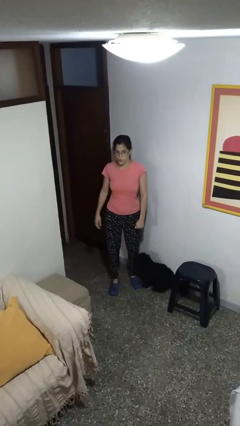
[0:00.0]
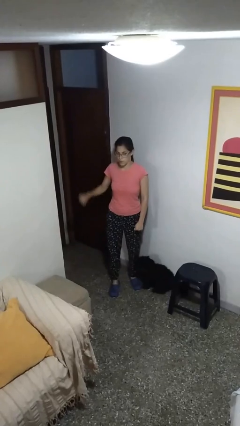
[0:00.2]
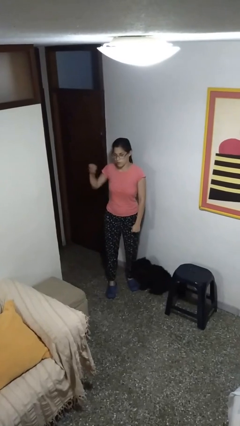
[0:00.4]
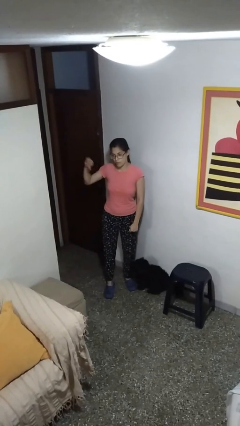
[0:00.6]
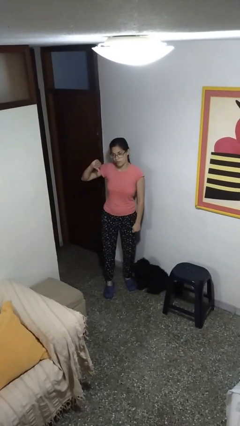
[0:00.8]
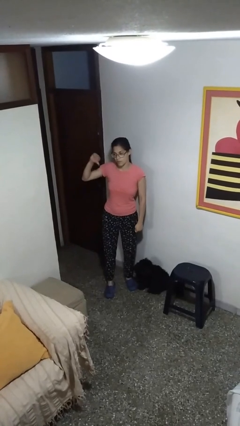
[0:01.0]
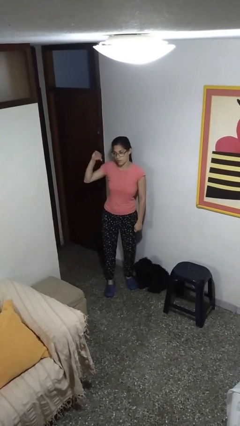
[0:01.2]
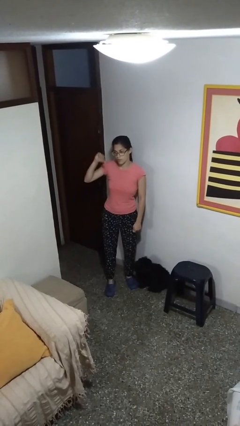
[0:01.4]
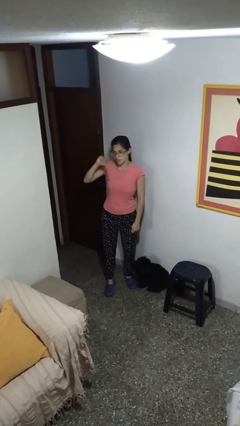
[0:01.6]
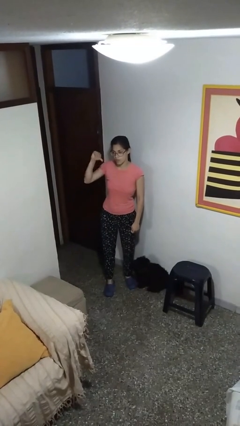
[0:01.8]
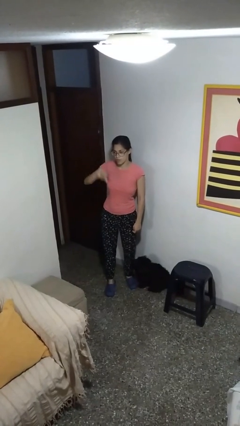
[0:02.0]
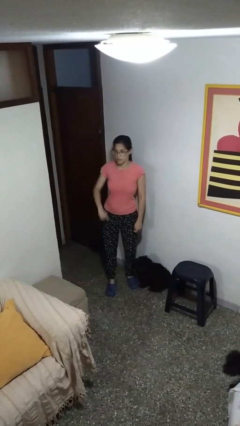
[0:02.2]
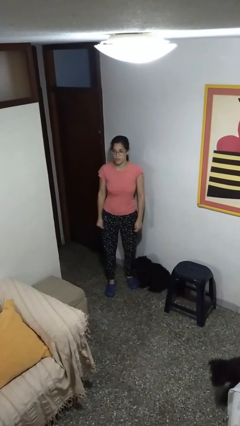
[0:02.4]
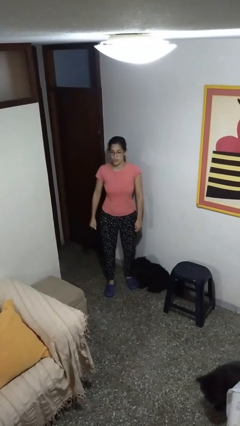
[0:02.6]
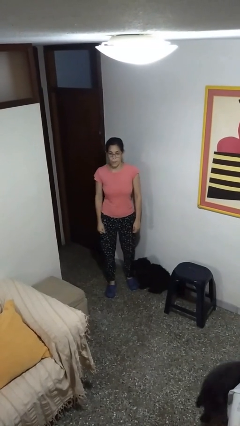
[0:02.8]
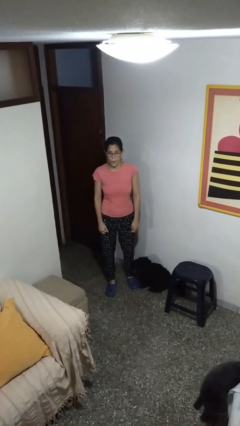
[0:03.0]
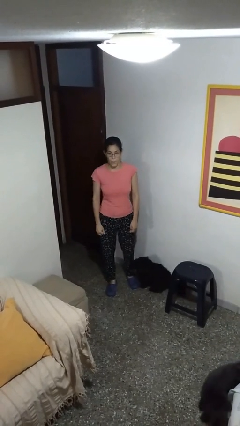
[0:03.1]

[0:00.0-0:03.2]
person gestures thumbs down

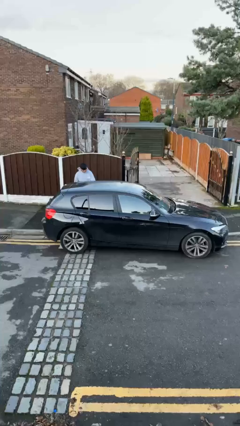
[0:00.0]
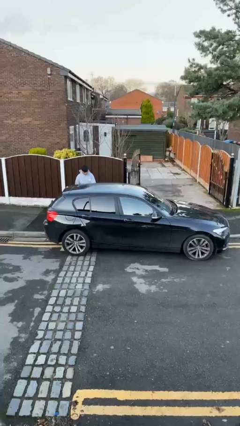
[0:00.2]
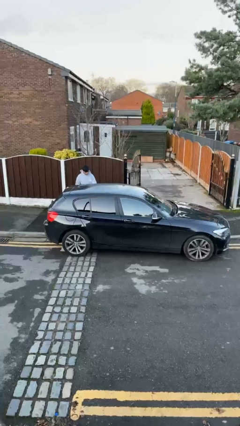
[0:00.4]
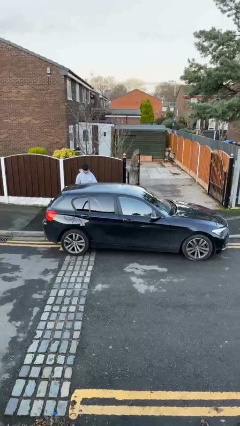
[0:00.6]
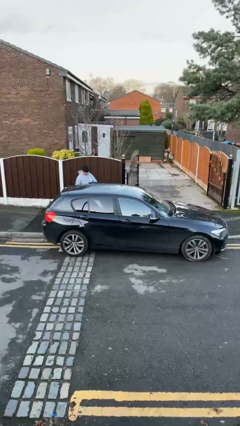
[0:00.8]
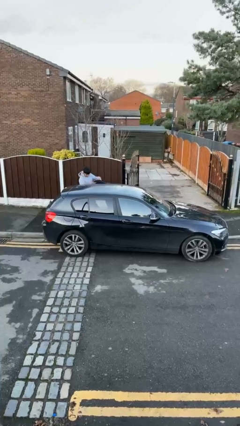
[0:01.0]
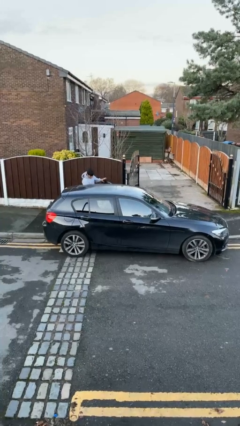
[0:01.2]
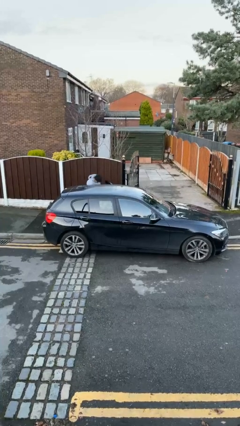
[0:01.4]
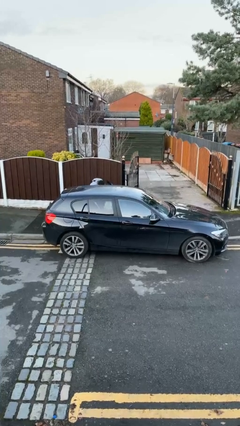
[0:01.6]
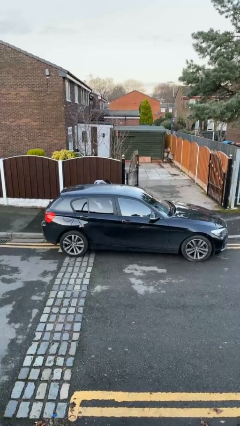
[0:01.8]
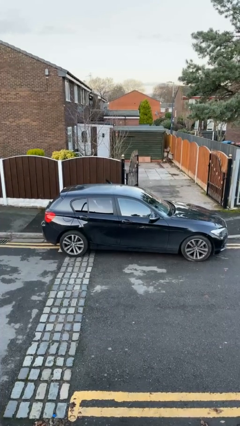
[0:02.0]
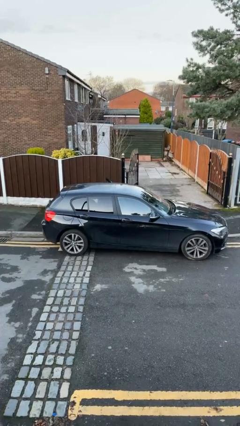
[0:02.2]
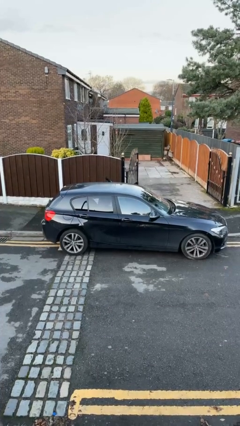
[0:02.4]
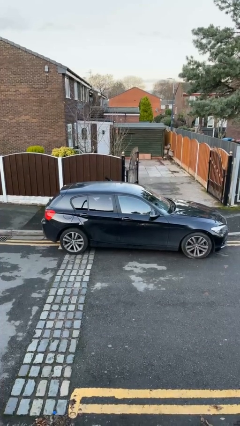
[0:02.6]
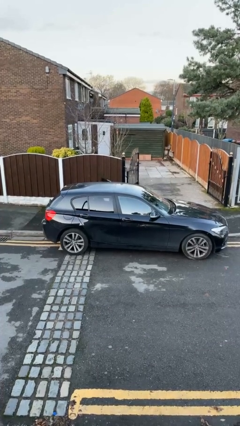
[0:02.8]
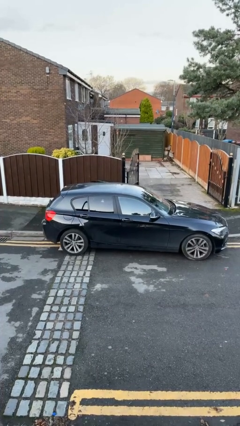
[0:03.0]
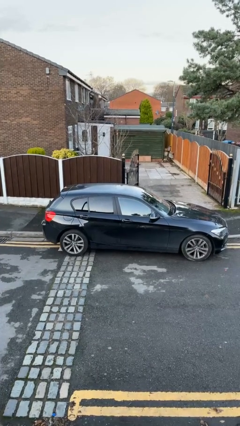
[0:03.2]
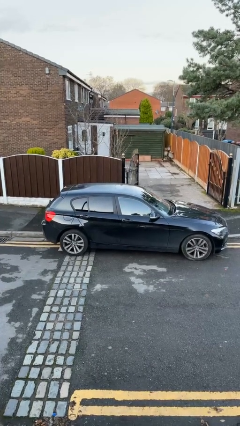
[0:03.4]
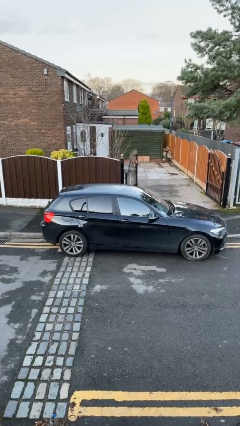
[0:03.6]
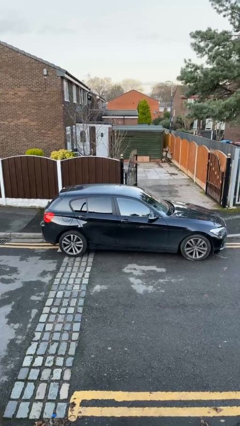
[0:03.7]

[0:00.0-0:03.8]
car picks up person

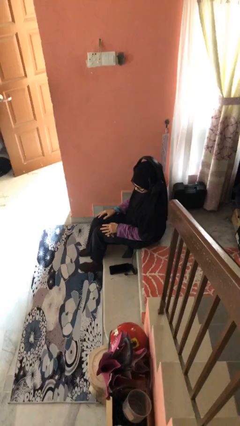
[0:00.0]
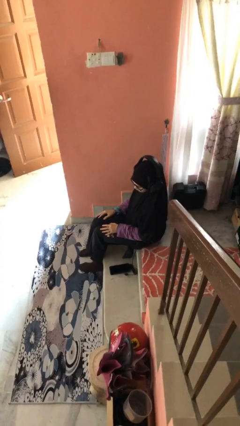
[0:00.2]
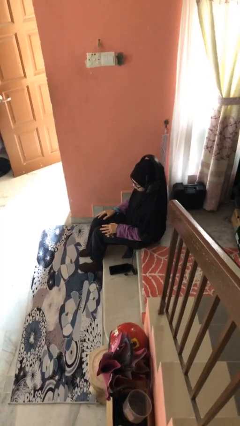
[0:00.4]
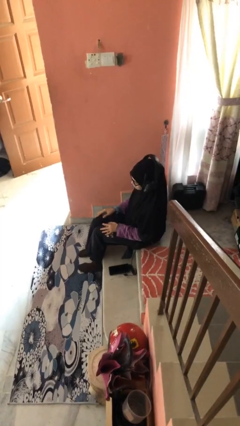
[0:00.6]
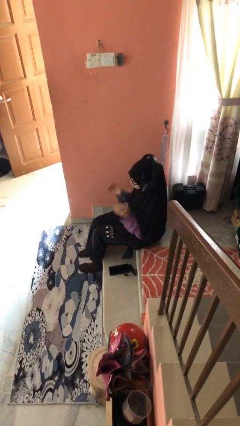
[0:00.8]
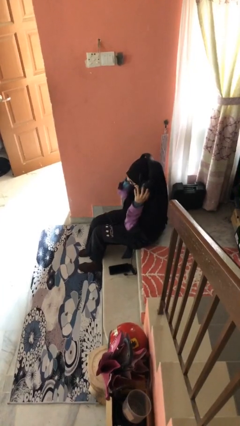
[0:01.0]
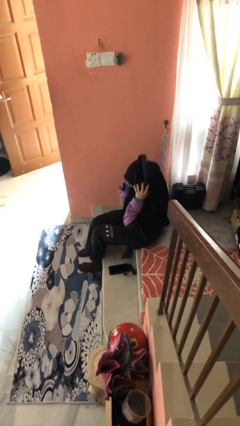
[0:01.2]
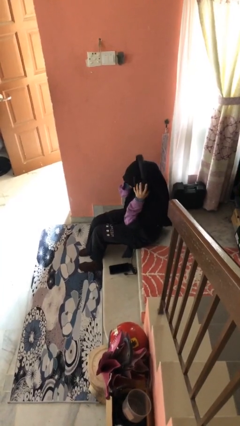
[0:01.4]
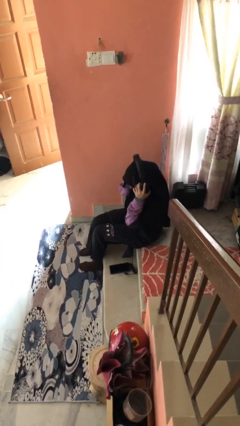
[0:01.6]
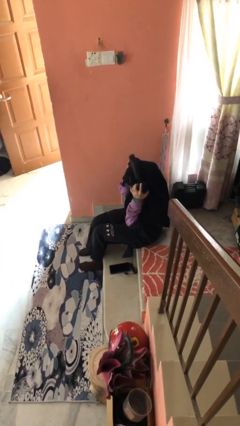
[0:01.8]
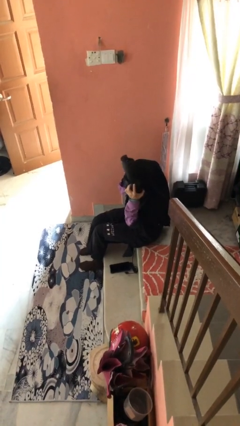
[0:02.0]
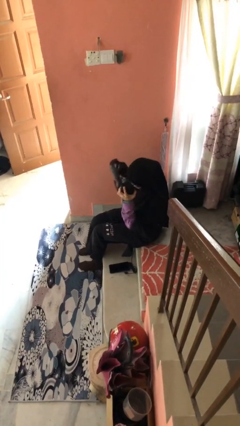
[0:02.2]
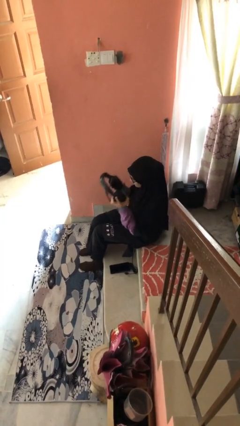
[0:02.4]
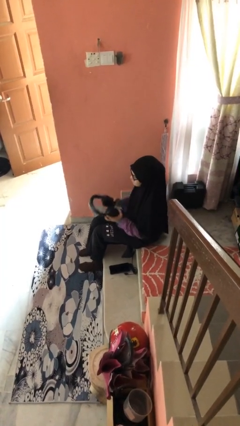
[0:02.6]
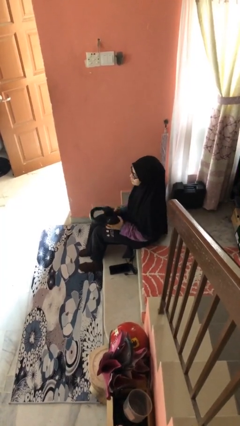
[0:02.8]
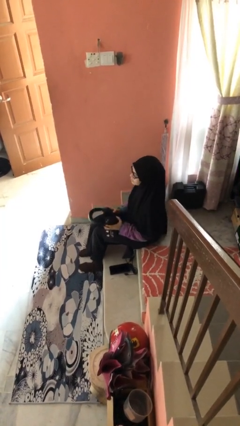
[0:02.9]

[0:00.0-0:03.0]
person takes off headphones

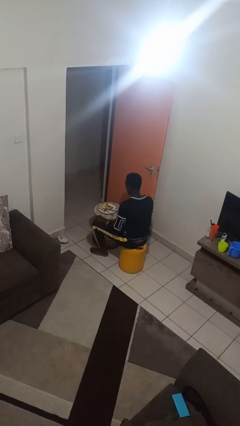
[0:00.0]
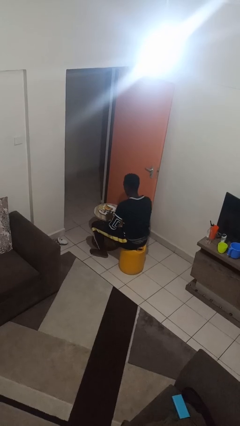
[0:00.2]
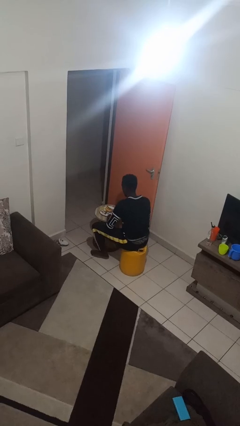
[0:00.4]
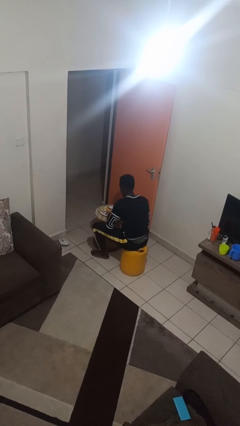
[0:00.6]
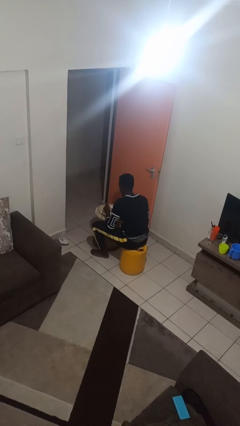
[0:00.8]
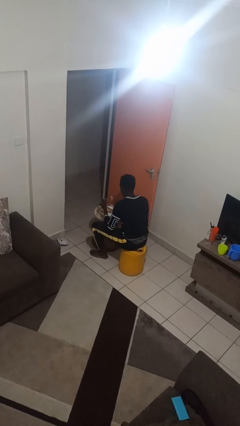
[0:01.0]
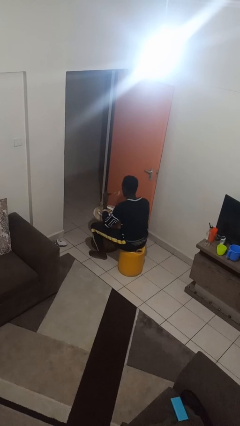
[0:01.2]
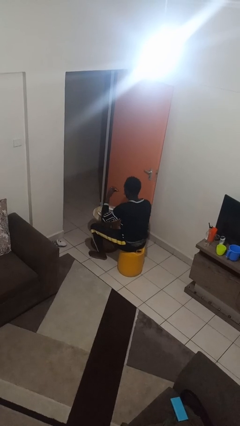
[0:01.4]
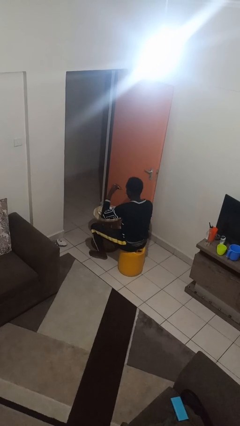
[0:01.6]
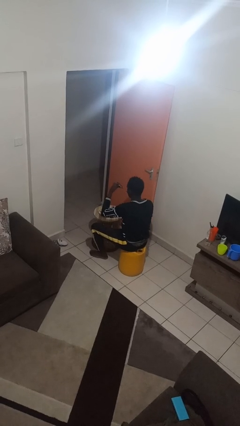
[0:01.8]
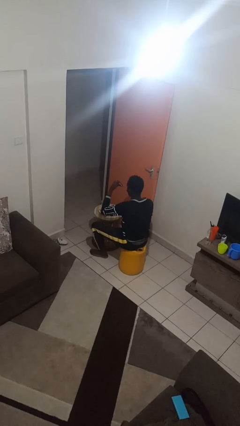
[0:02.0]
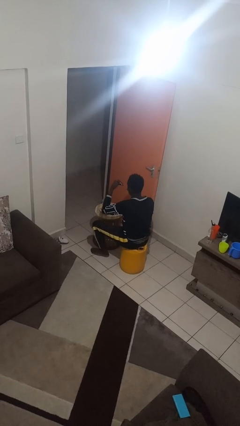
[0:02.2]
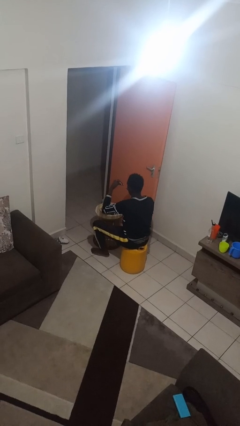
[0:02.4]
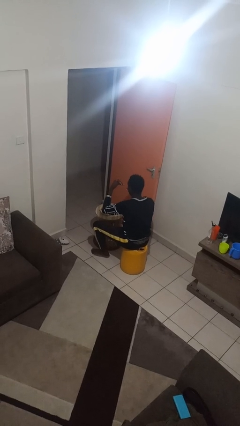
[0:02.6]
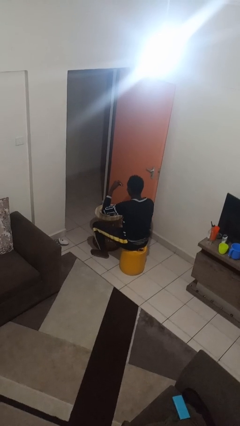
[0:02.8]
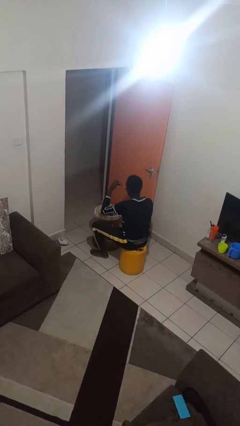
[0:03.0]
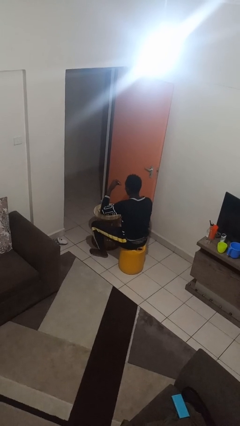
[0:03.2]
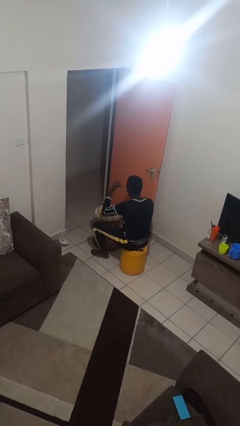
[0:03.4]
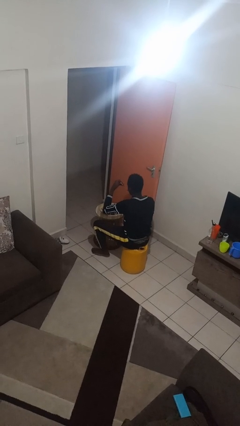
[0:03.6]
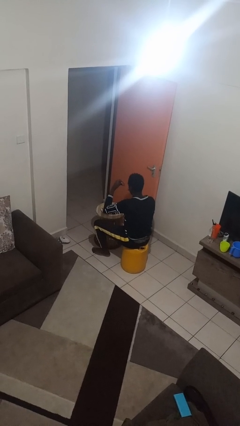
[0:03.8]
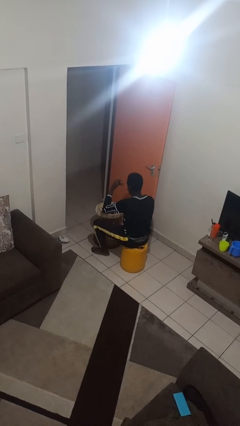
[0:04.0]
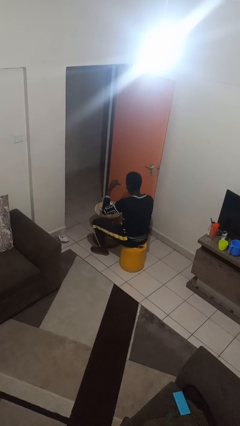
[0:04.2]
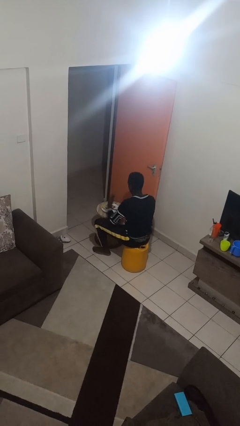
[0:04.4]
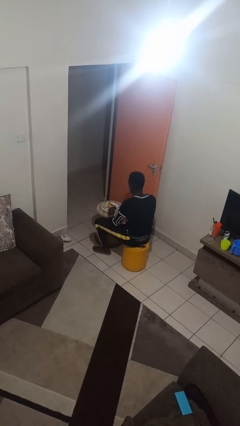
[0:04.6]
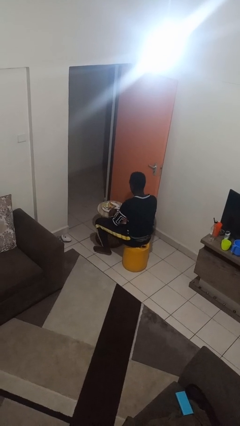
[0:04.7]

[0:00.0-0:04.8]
person eats with utensil

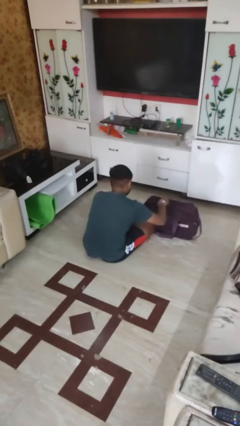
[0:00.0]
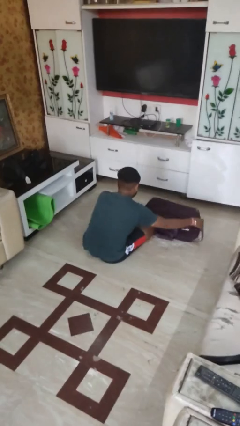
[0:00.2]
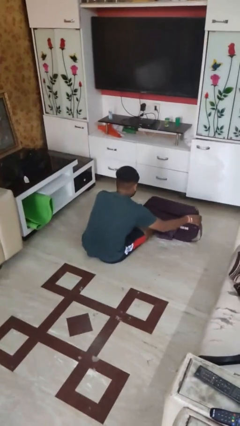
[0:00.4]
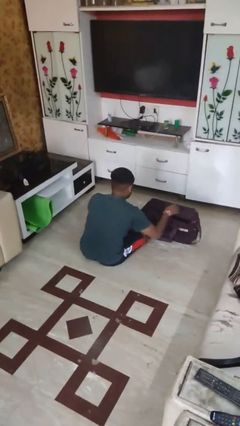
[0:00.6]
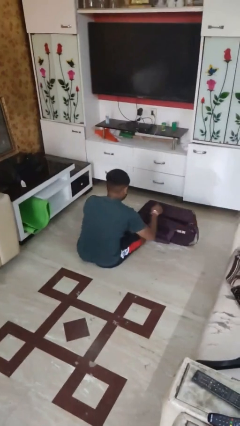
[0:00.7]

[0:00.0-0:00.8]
person opens suitcase

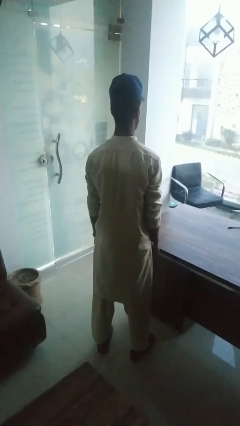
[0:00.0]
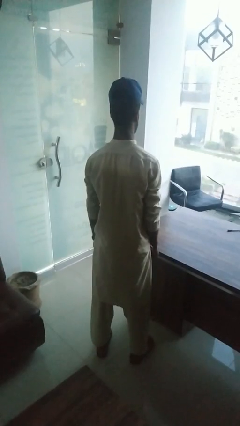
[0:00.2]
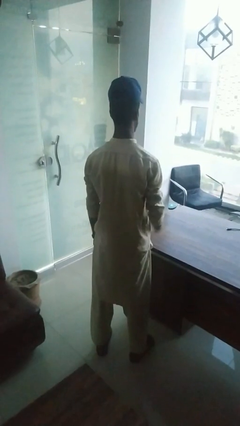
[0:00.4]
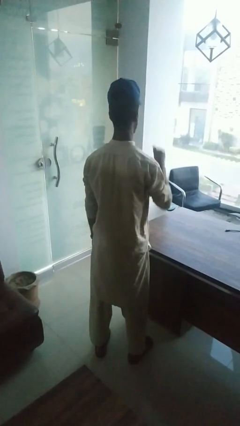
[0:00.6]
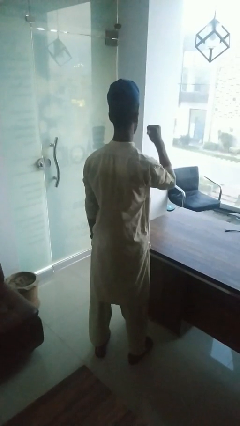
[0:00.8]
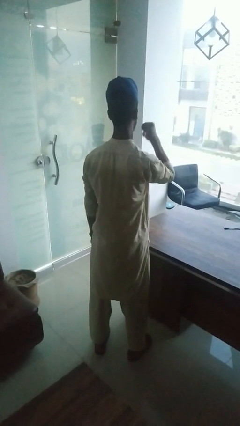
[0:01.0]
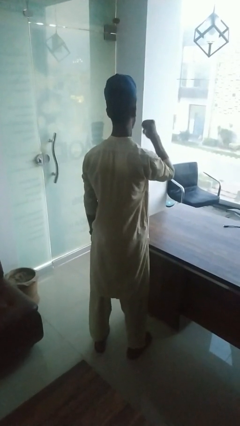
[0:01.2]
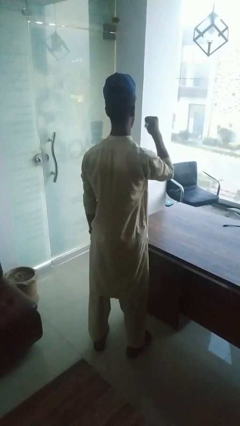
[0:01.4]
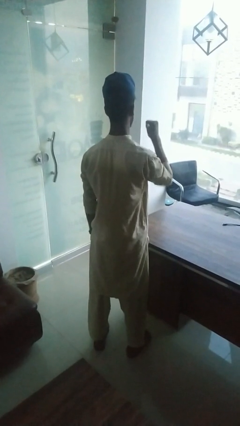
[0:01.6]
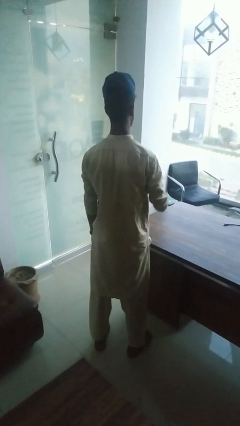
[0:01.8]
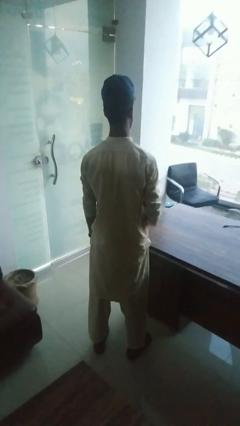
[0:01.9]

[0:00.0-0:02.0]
person gestures behind me
